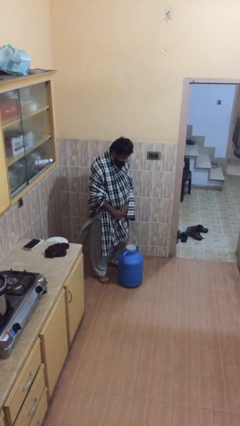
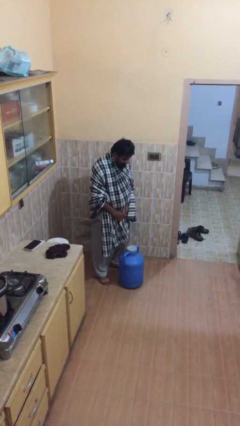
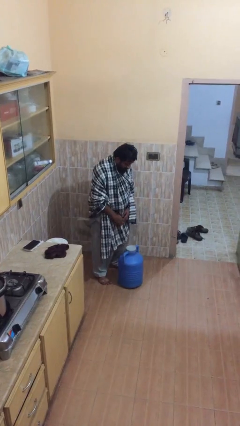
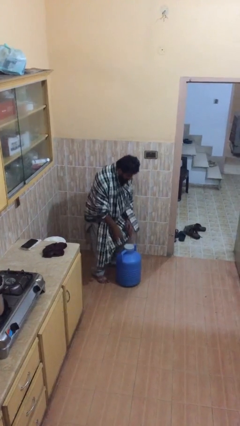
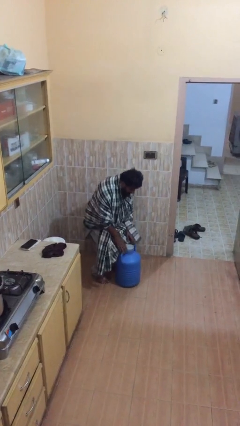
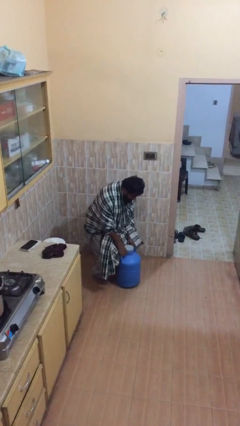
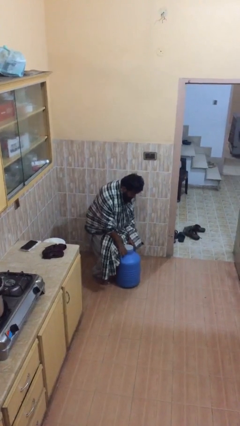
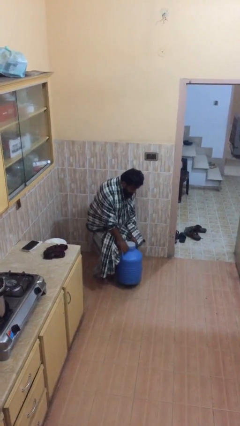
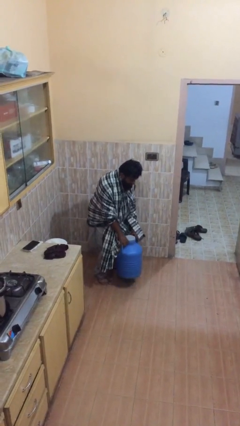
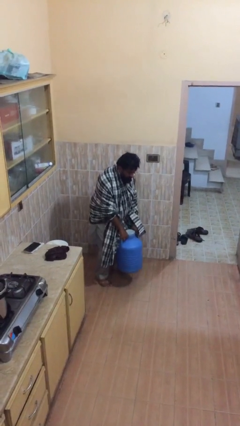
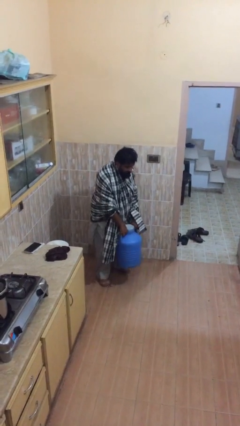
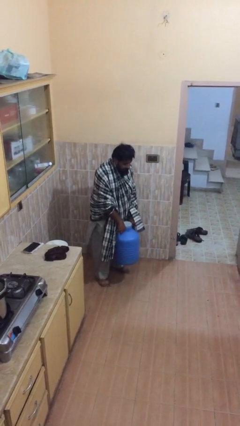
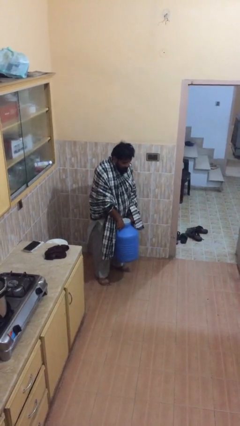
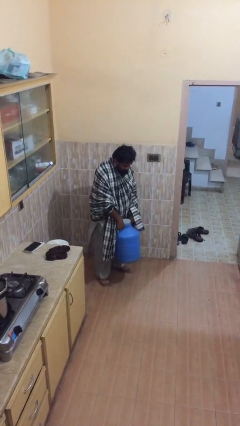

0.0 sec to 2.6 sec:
person picks up object from floor

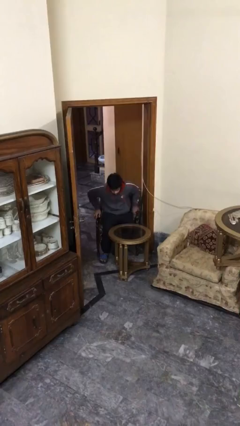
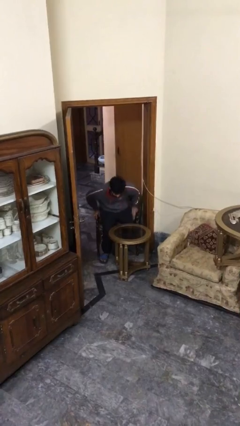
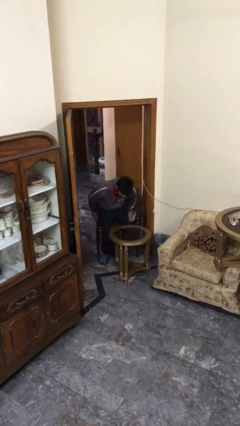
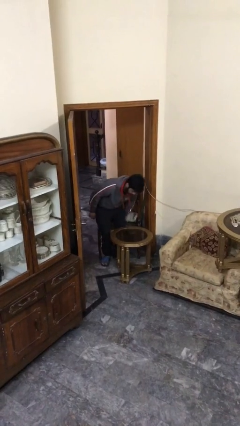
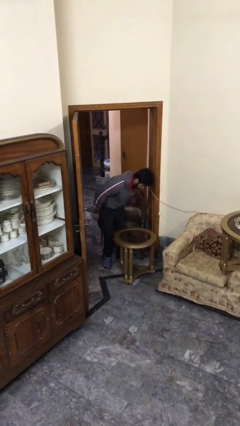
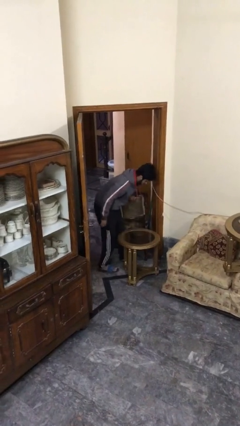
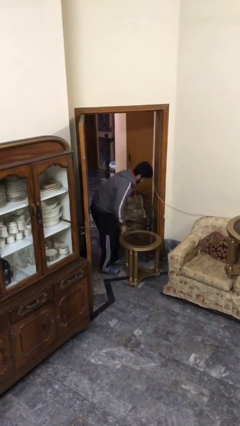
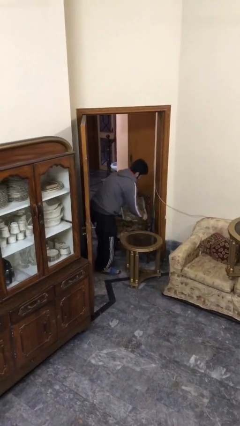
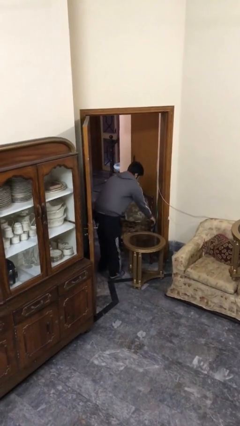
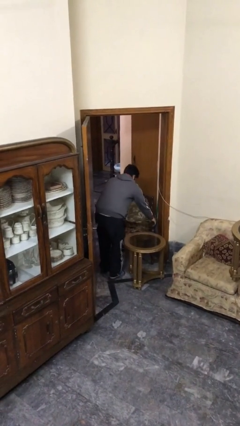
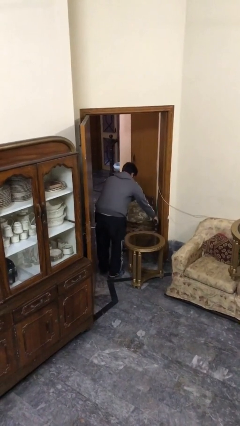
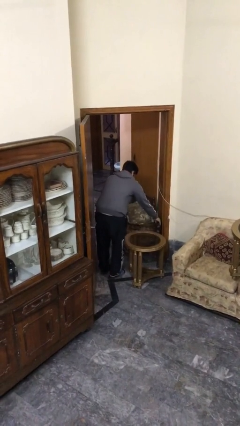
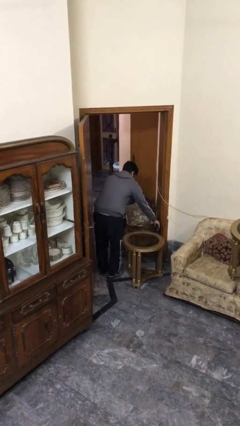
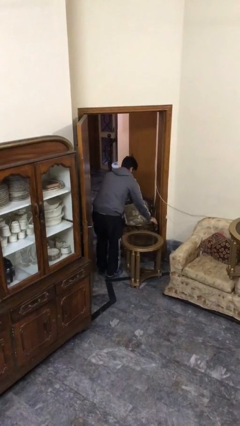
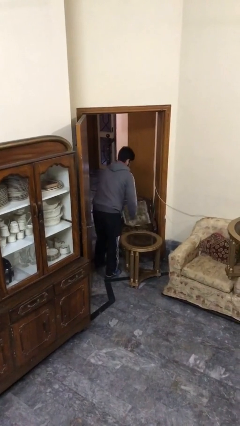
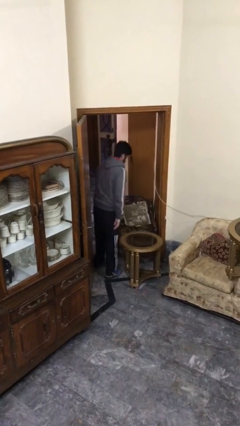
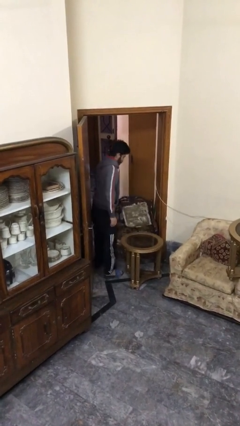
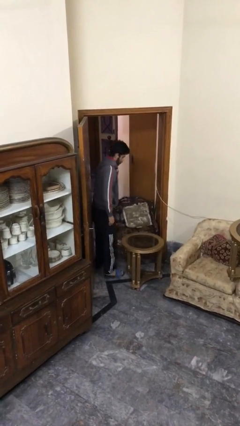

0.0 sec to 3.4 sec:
person stands up

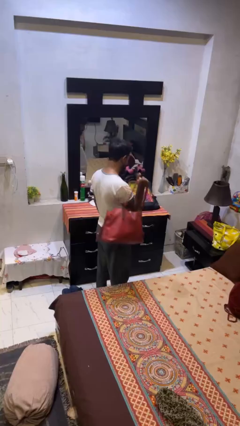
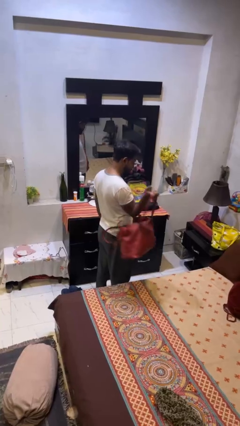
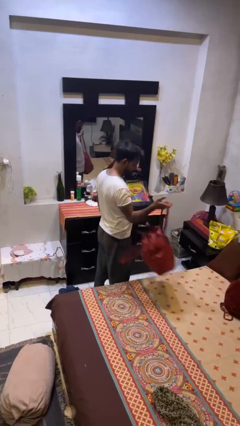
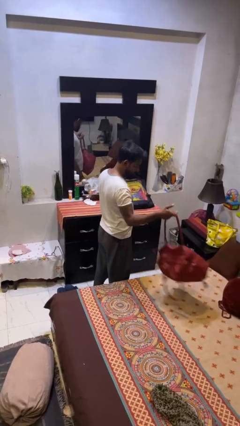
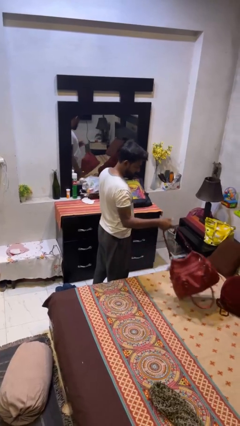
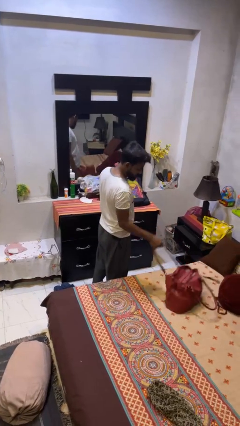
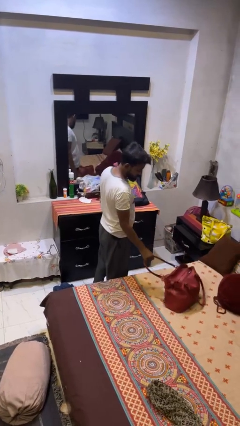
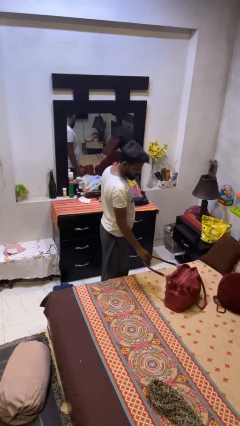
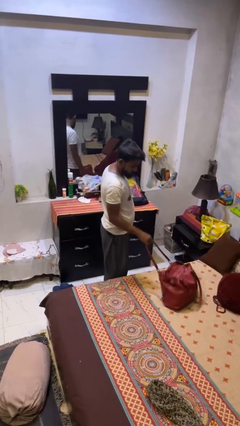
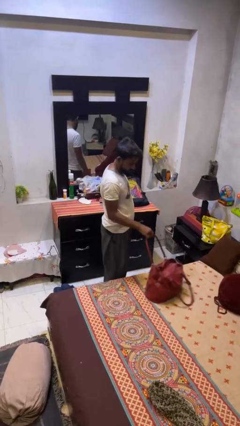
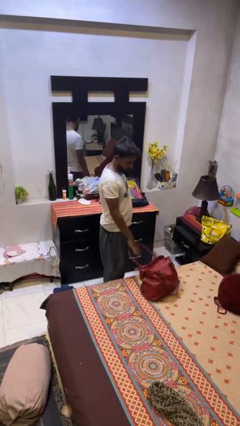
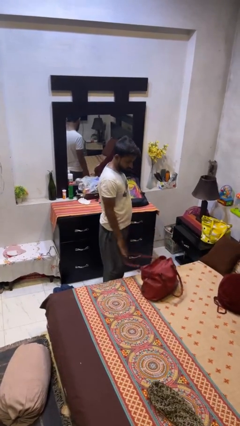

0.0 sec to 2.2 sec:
person puts down object on bed

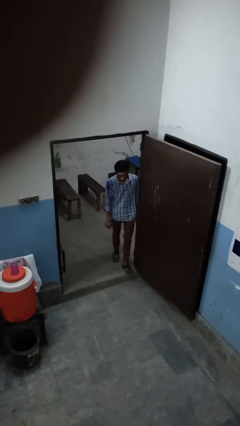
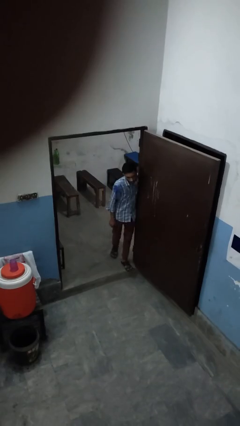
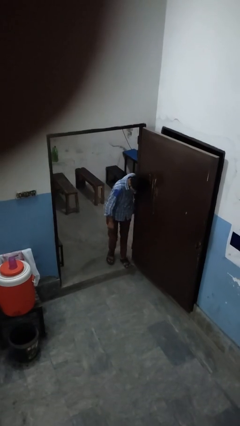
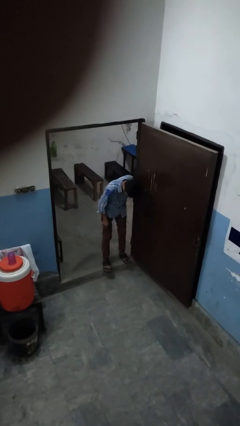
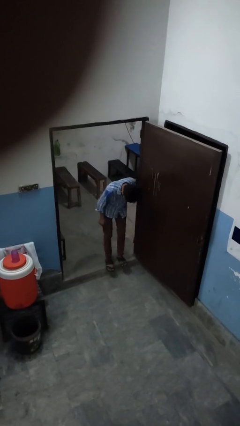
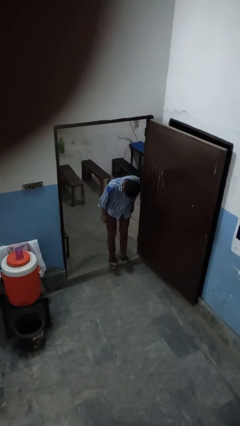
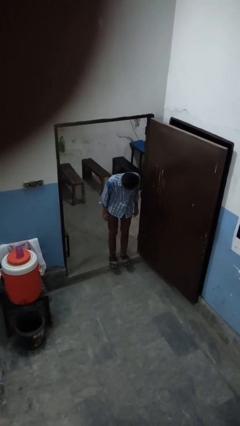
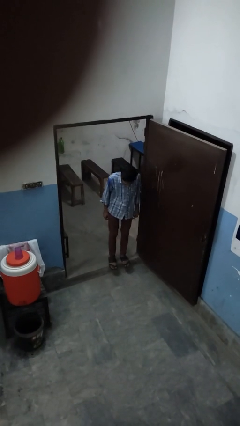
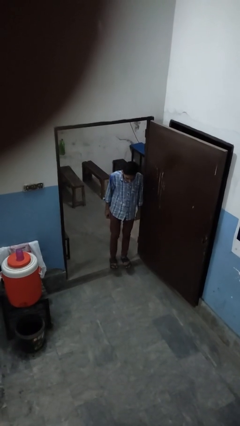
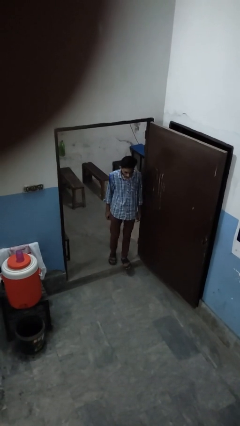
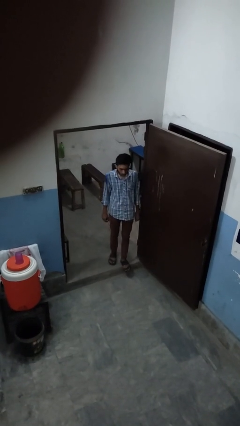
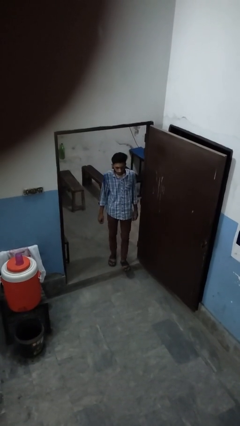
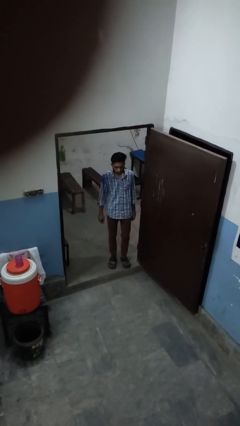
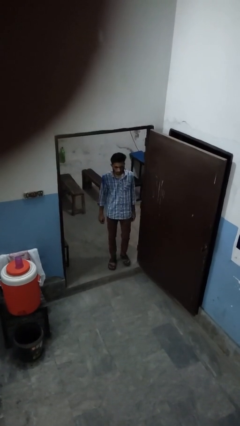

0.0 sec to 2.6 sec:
person bumps into wall

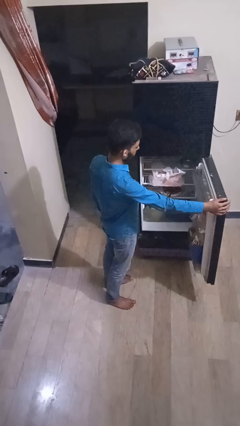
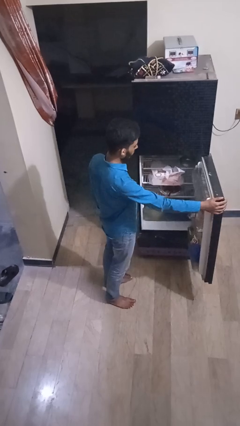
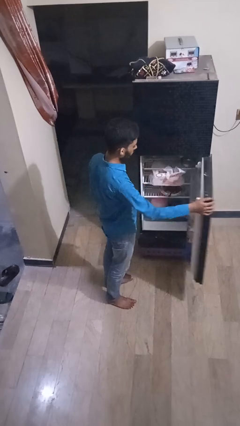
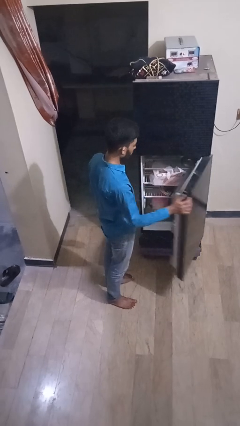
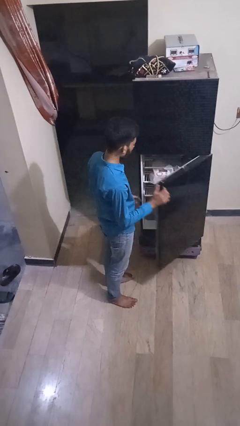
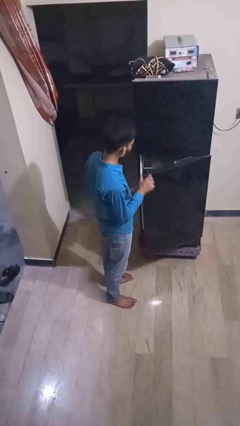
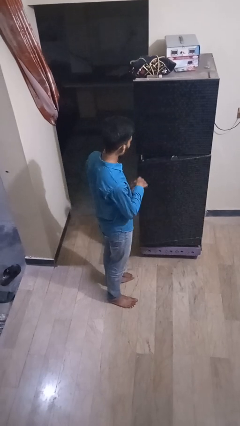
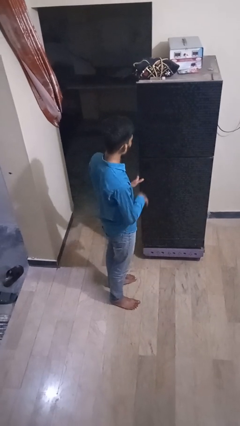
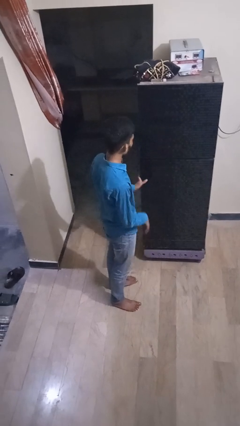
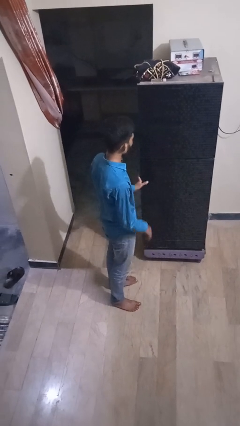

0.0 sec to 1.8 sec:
person closes refrigerator

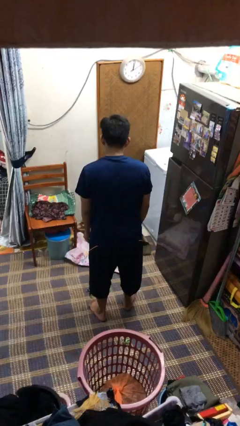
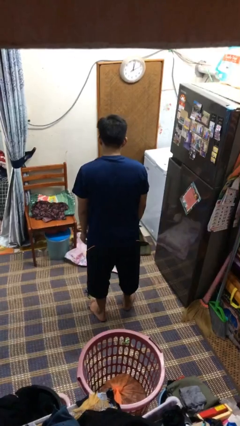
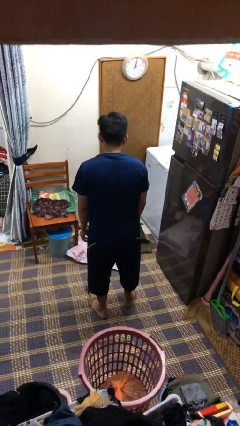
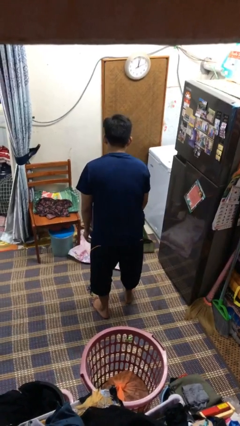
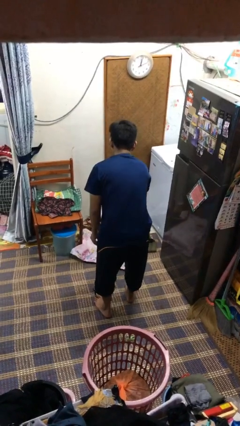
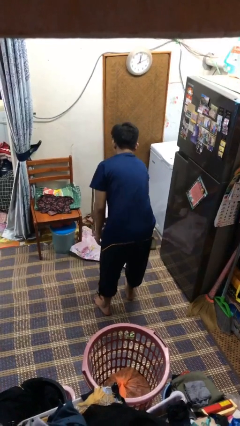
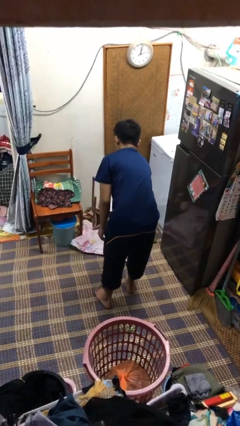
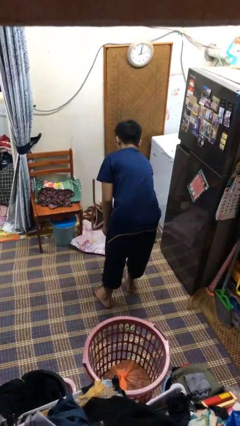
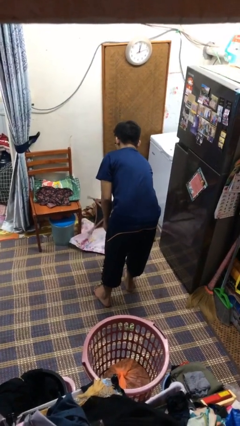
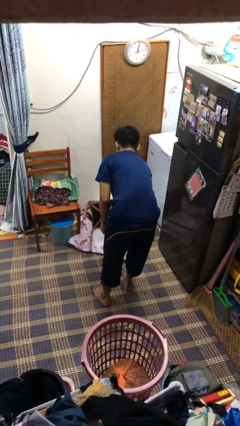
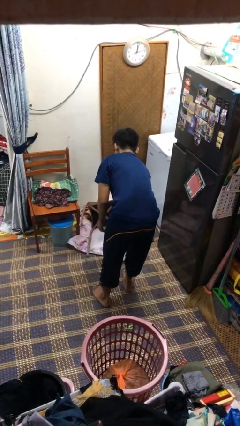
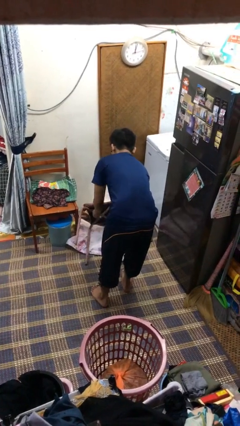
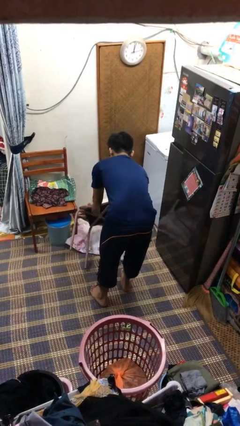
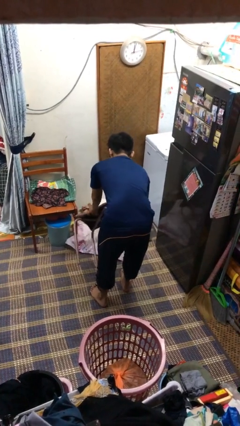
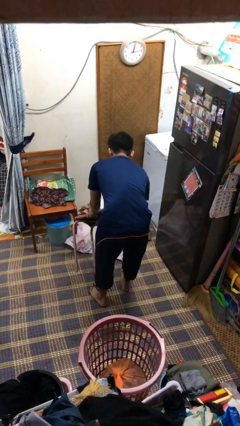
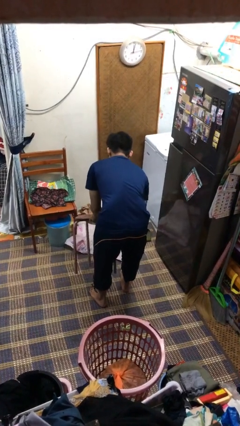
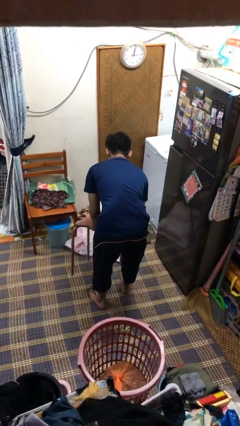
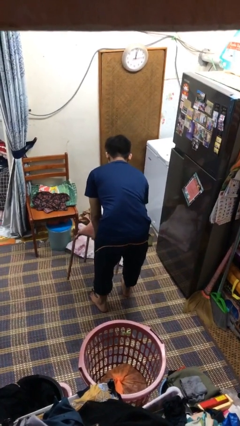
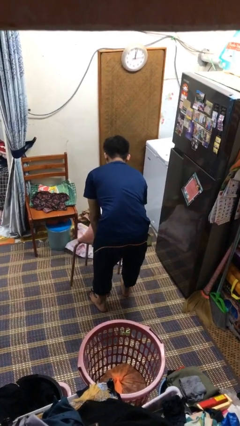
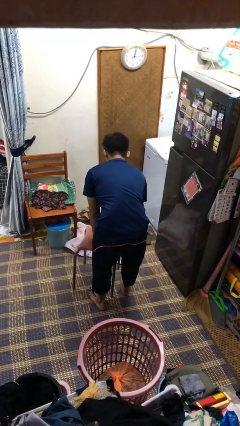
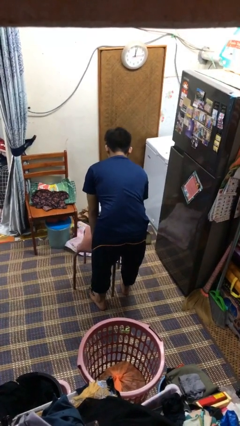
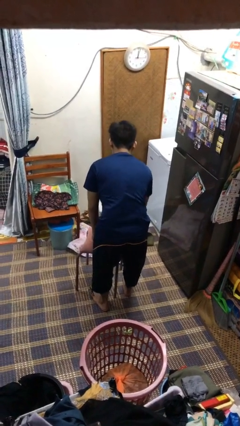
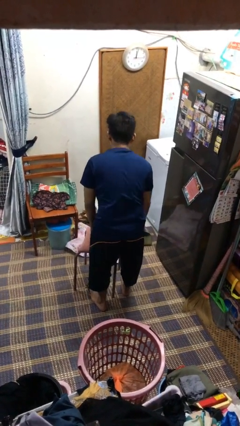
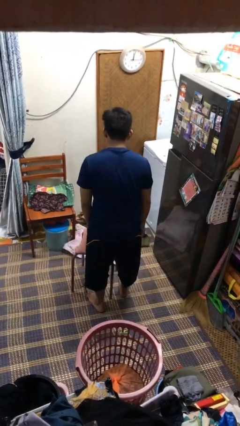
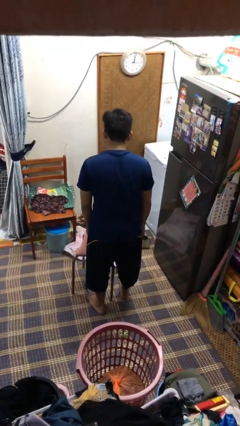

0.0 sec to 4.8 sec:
person sets upright furniture
